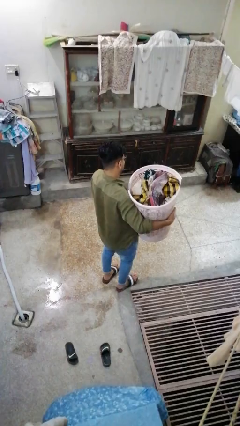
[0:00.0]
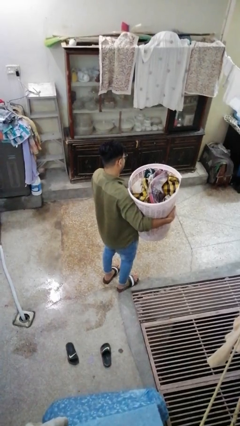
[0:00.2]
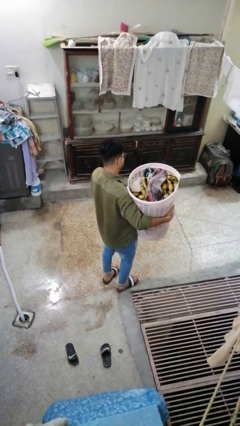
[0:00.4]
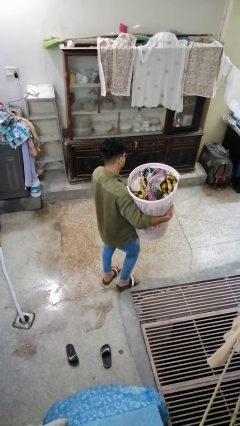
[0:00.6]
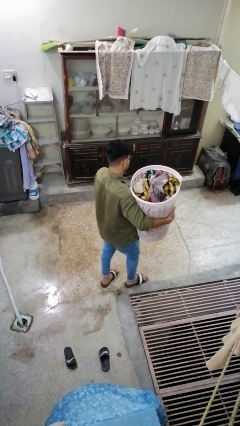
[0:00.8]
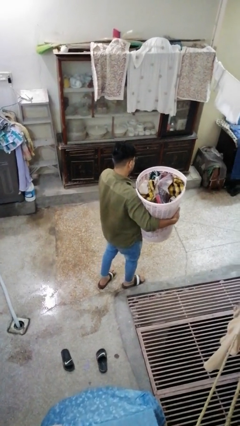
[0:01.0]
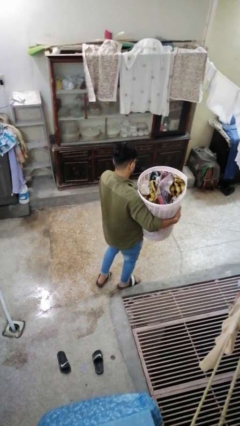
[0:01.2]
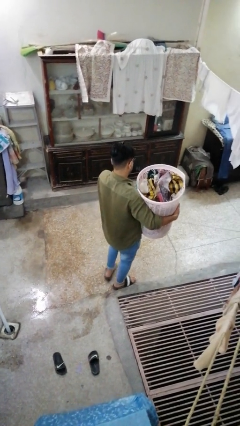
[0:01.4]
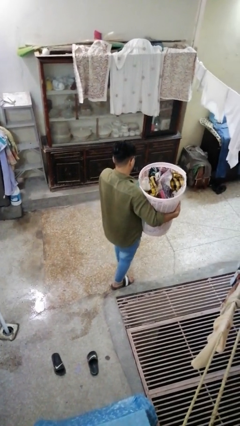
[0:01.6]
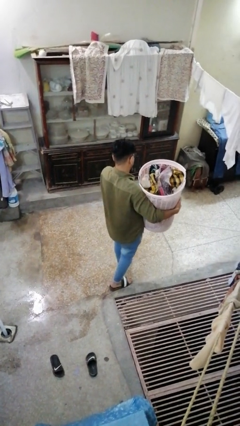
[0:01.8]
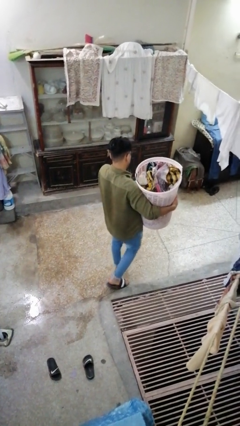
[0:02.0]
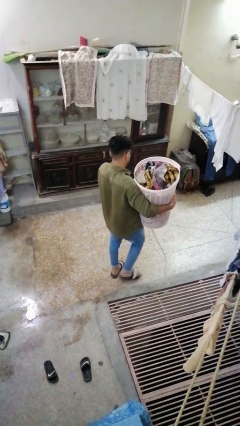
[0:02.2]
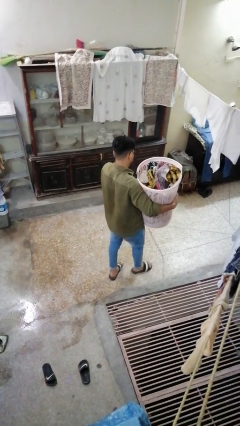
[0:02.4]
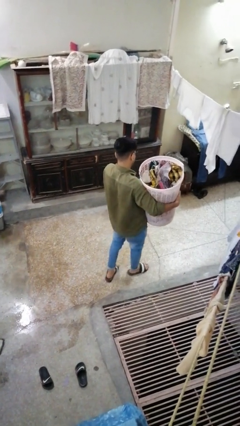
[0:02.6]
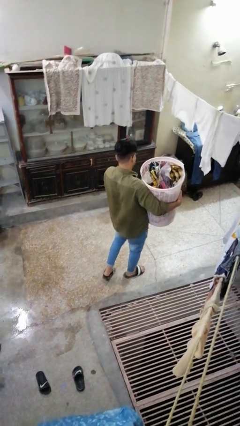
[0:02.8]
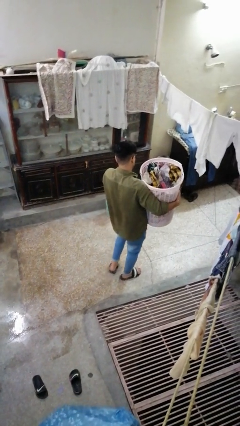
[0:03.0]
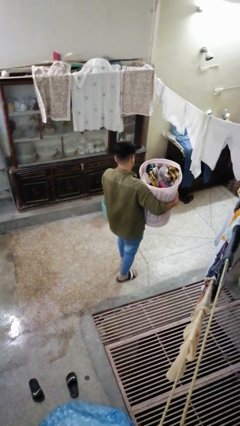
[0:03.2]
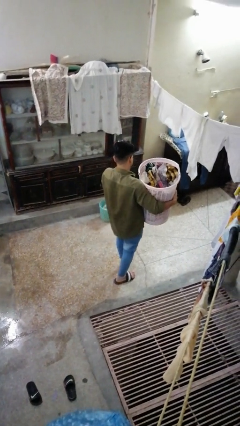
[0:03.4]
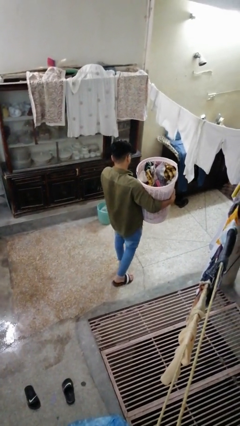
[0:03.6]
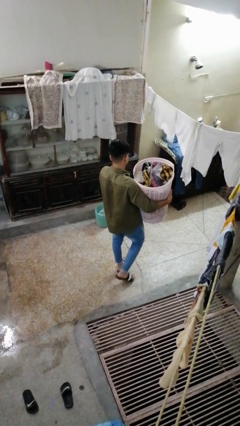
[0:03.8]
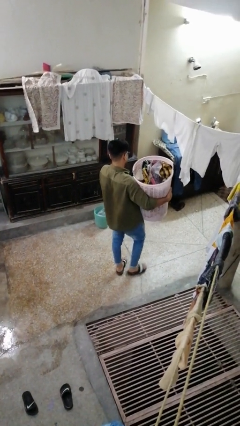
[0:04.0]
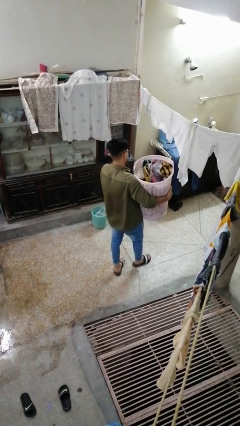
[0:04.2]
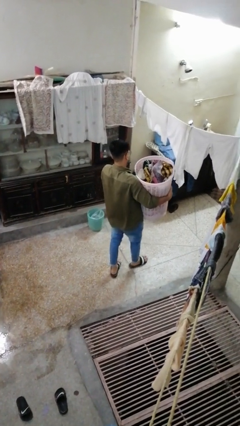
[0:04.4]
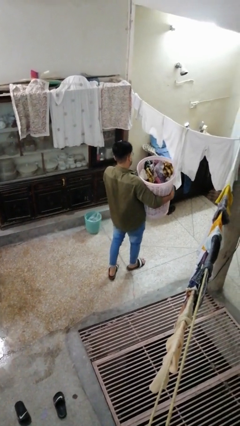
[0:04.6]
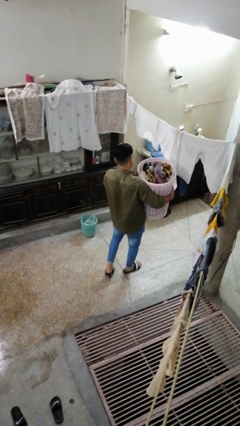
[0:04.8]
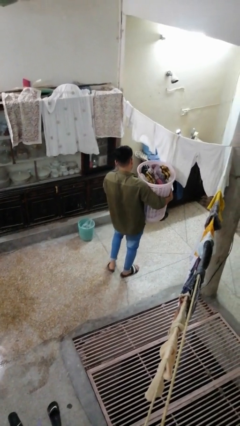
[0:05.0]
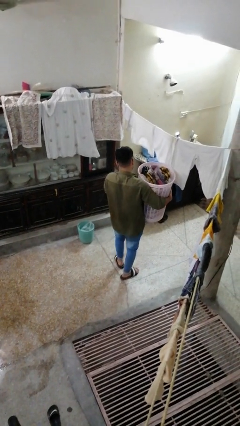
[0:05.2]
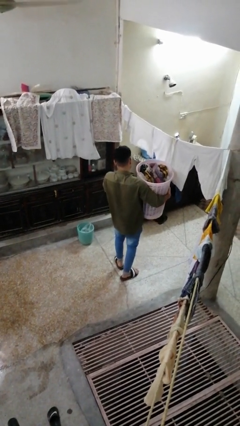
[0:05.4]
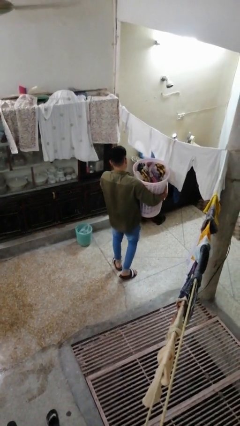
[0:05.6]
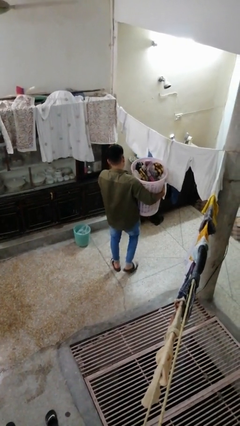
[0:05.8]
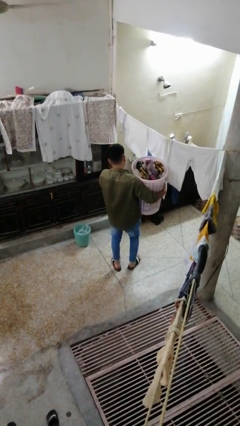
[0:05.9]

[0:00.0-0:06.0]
person carries laundry basket

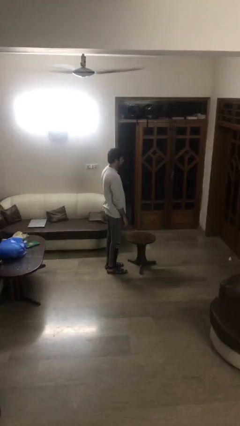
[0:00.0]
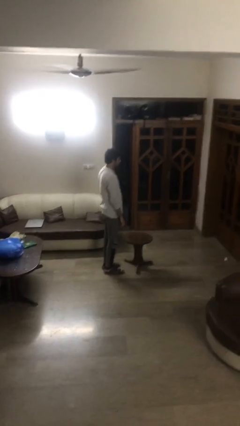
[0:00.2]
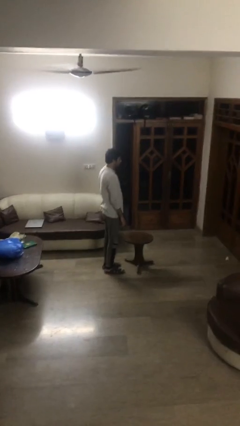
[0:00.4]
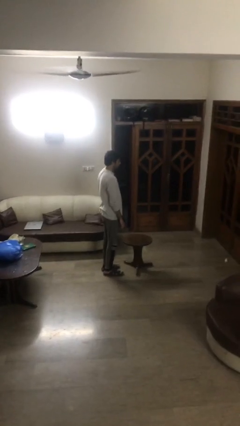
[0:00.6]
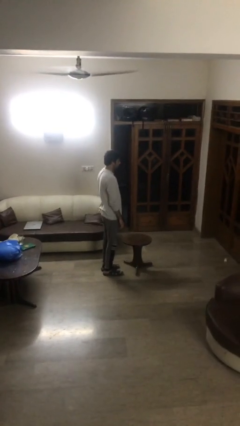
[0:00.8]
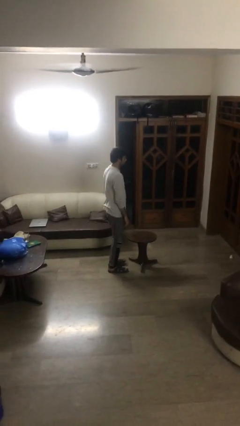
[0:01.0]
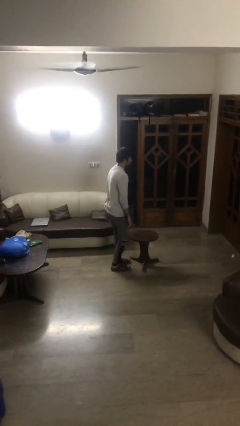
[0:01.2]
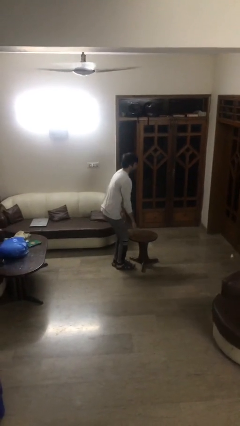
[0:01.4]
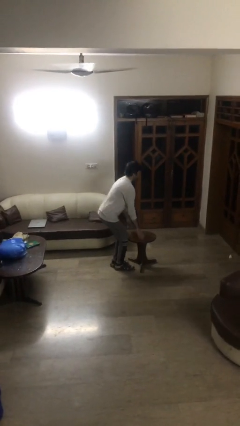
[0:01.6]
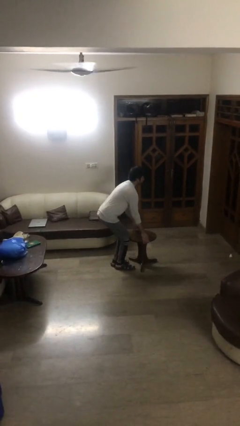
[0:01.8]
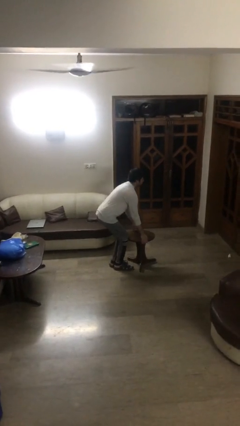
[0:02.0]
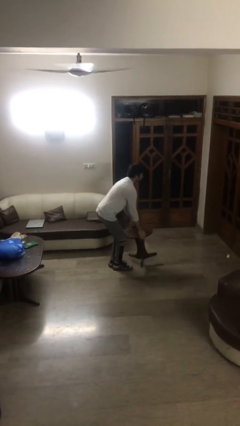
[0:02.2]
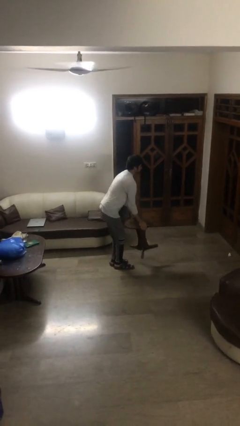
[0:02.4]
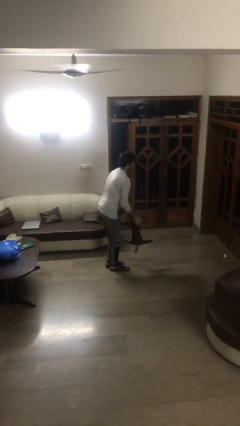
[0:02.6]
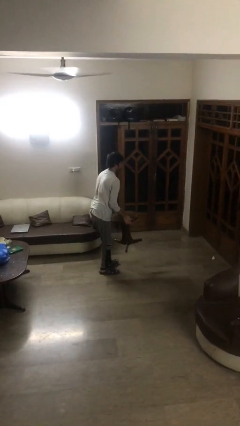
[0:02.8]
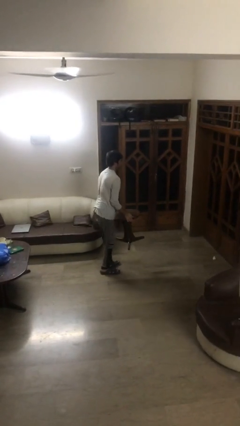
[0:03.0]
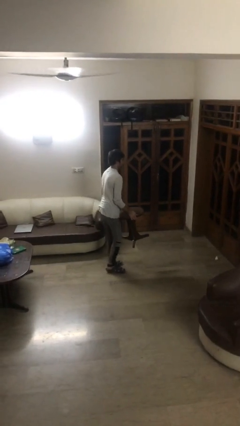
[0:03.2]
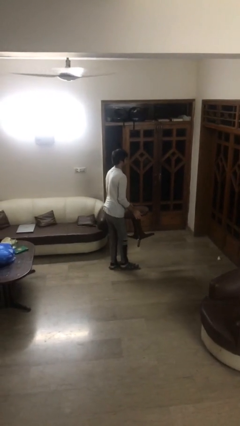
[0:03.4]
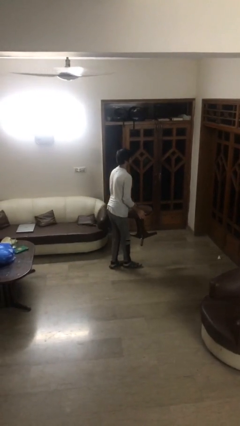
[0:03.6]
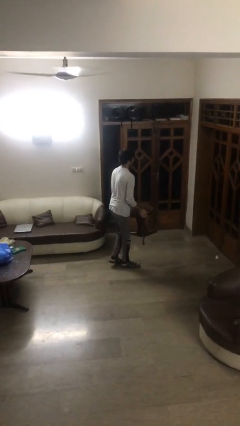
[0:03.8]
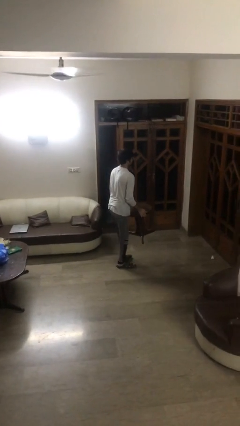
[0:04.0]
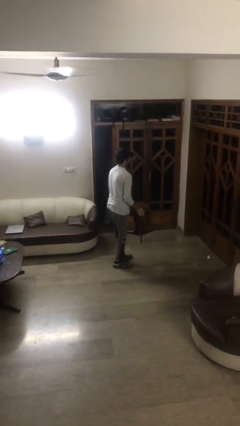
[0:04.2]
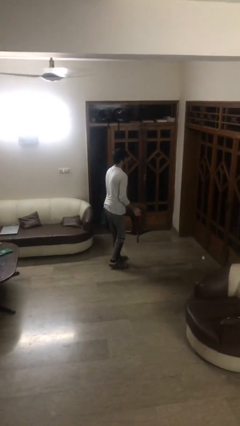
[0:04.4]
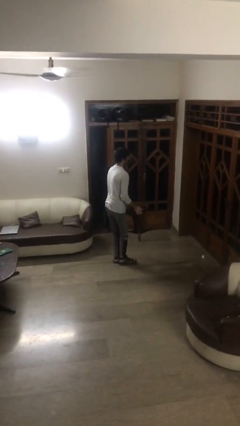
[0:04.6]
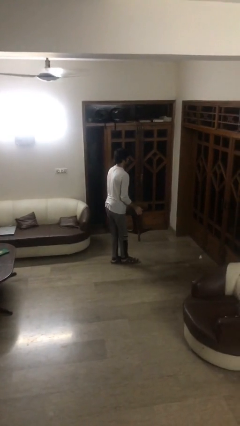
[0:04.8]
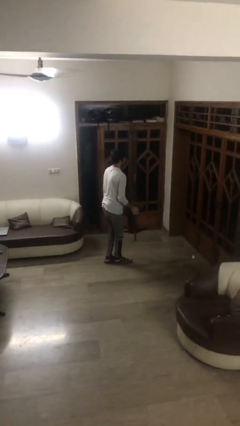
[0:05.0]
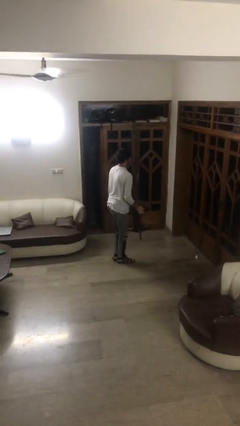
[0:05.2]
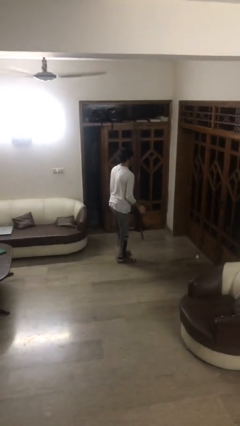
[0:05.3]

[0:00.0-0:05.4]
person carries heavy object

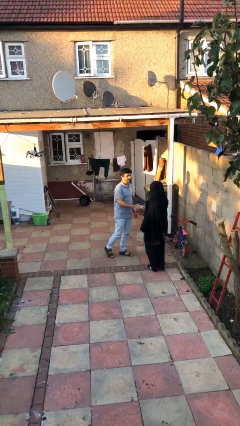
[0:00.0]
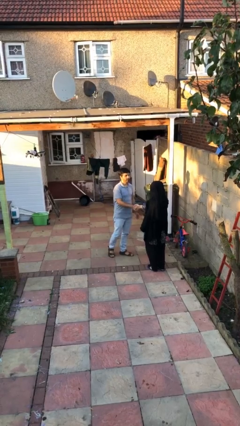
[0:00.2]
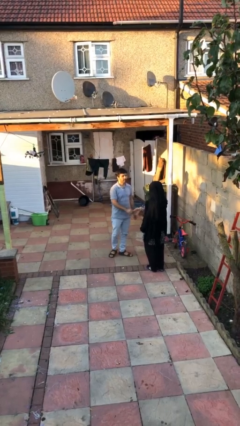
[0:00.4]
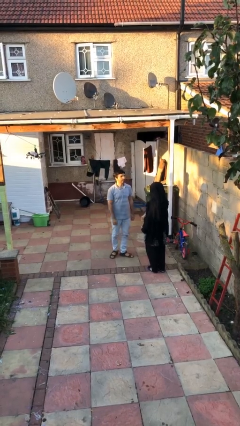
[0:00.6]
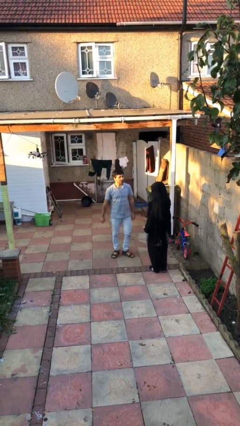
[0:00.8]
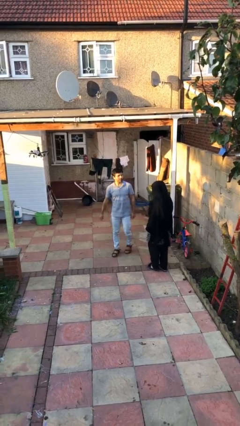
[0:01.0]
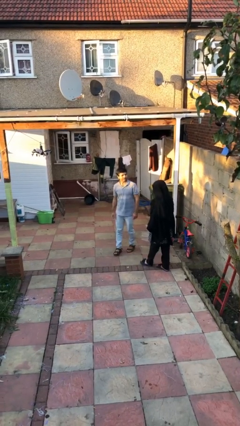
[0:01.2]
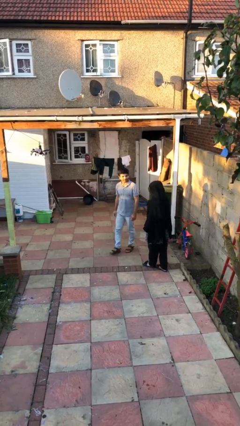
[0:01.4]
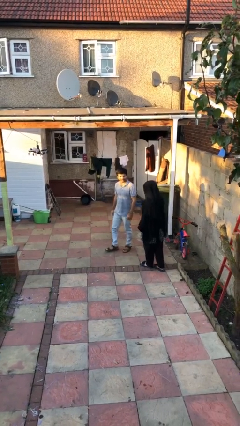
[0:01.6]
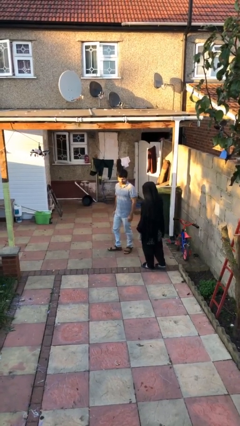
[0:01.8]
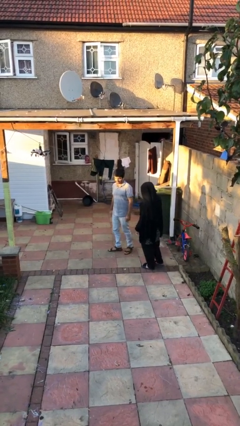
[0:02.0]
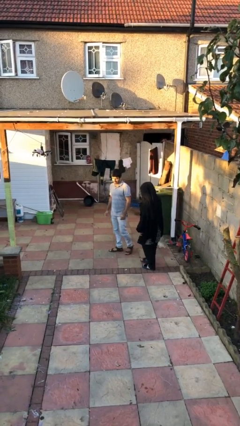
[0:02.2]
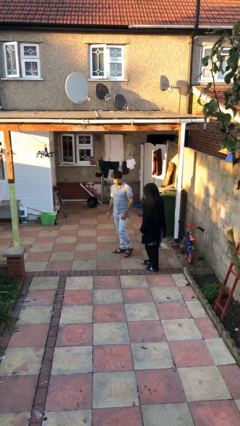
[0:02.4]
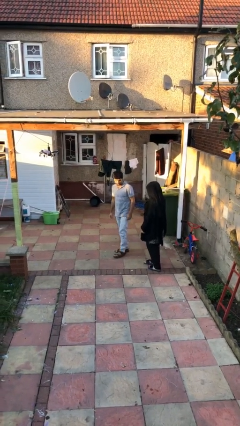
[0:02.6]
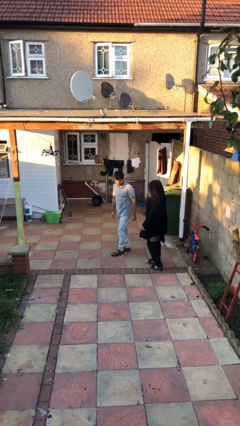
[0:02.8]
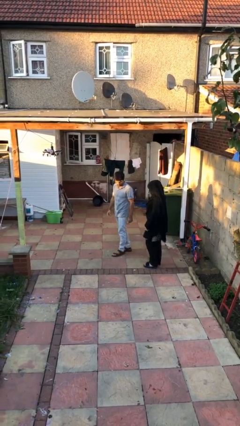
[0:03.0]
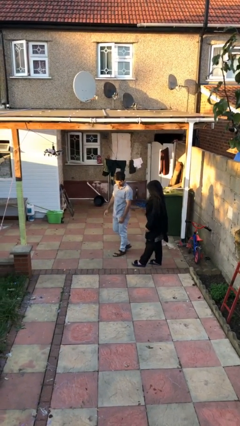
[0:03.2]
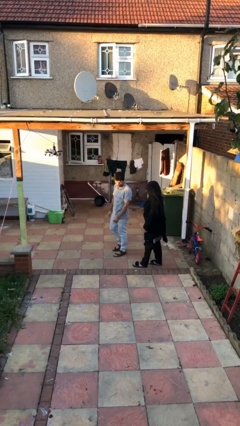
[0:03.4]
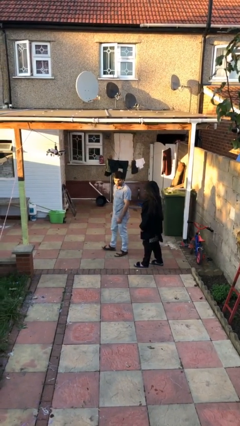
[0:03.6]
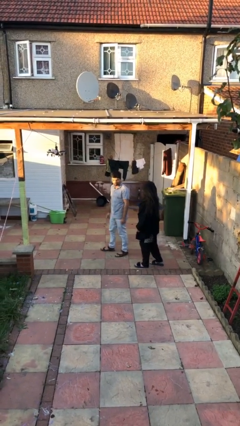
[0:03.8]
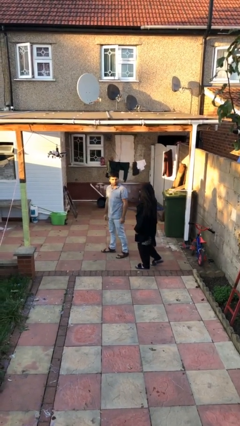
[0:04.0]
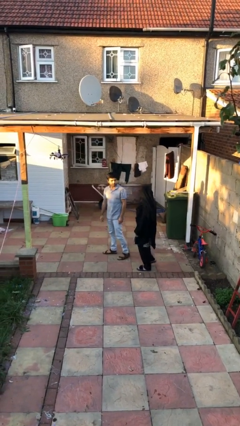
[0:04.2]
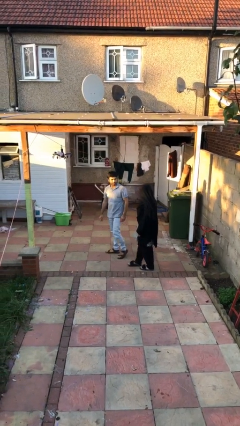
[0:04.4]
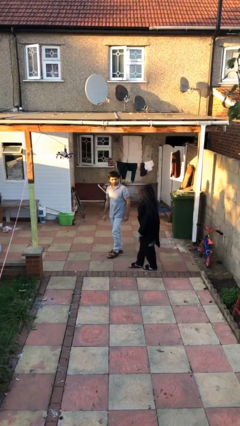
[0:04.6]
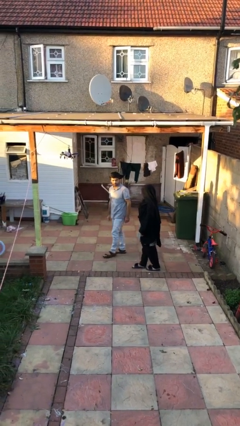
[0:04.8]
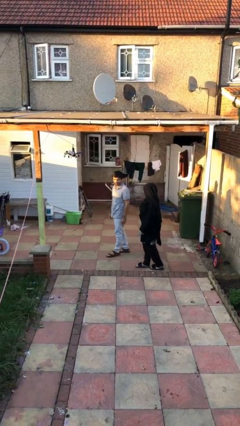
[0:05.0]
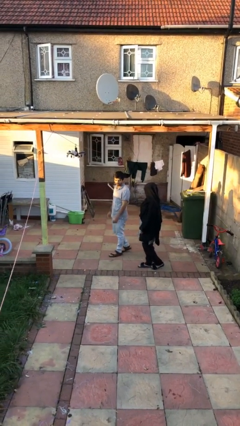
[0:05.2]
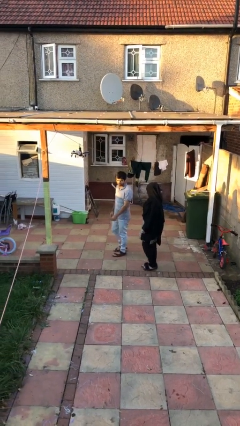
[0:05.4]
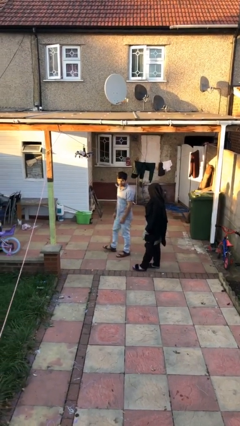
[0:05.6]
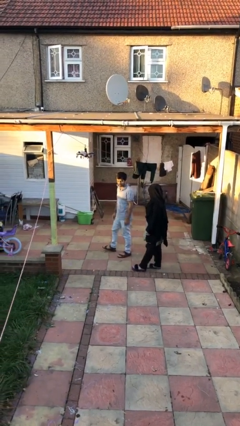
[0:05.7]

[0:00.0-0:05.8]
person talks to person

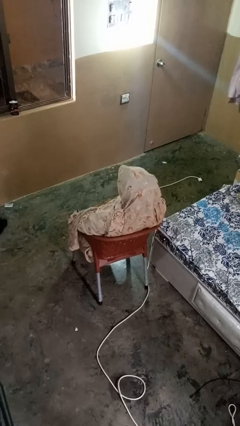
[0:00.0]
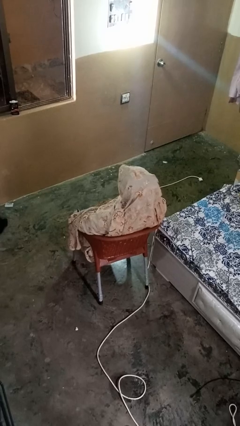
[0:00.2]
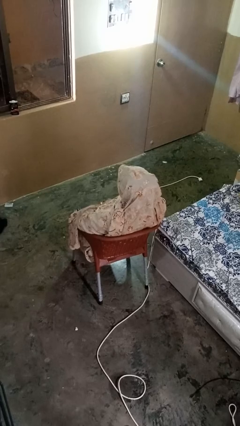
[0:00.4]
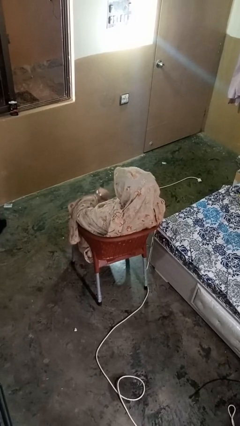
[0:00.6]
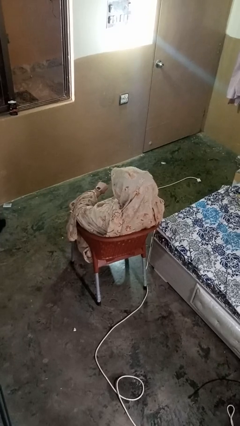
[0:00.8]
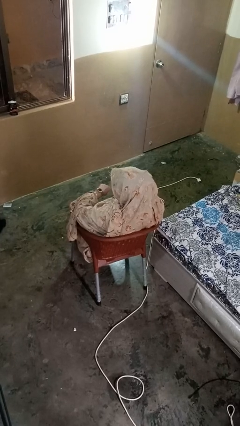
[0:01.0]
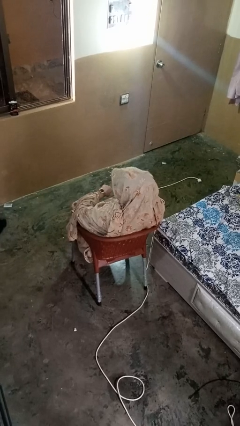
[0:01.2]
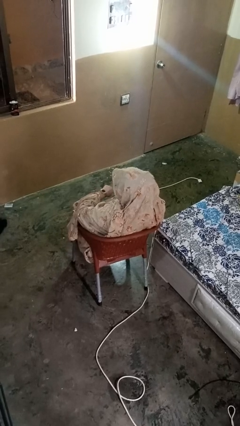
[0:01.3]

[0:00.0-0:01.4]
person looks at wristwatch
